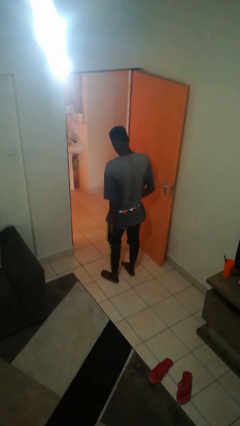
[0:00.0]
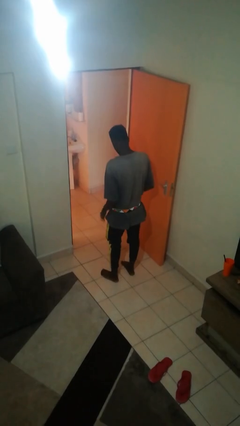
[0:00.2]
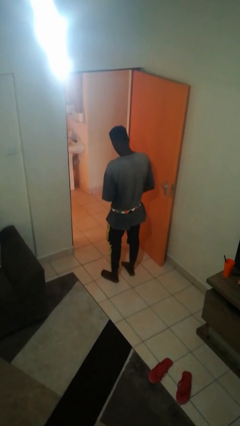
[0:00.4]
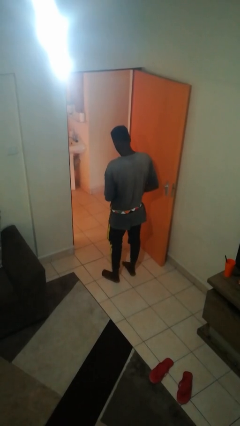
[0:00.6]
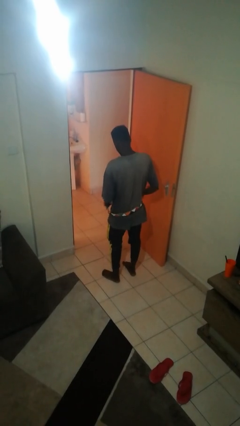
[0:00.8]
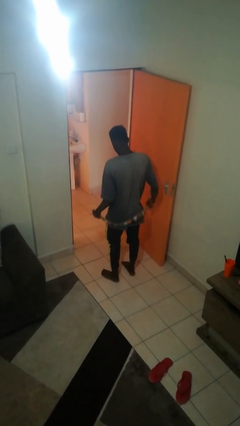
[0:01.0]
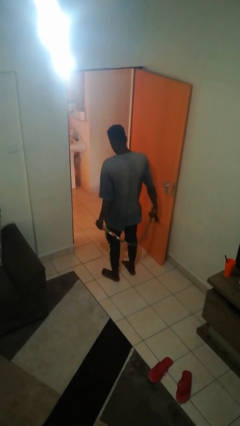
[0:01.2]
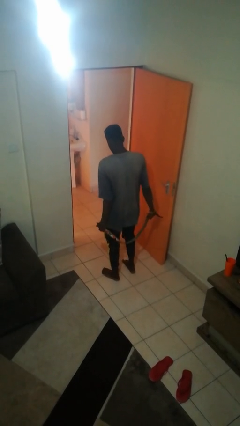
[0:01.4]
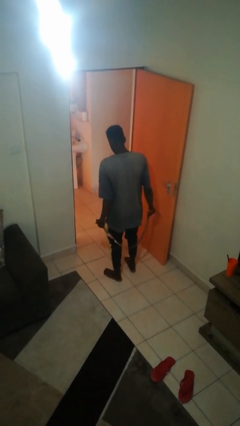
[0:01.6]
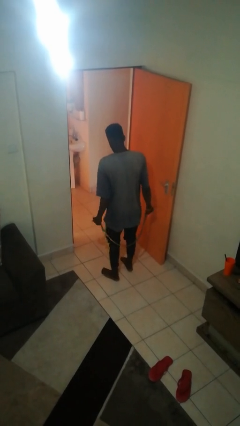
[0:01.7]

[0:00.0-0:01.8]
person takes off belt

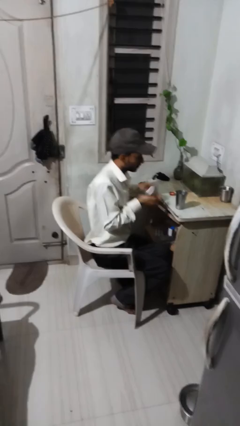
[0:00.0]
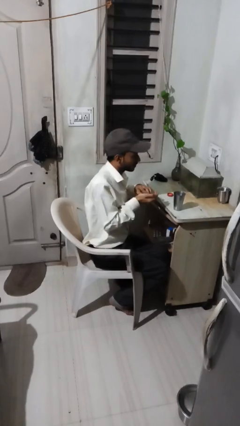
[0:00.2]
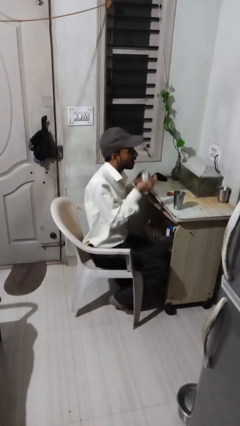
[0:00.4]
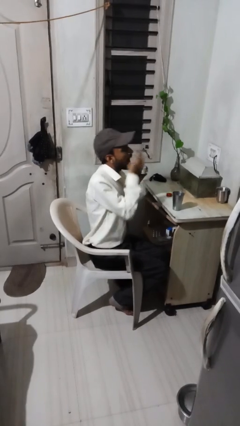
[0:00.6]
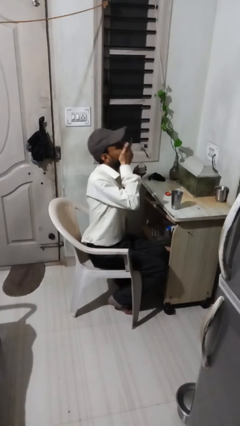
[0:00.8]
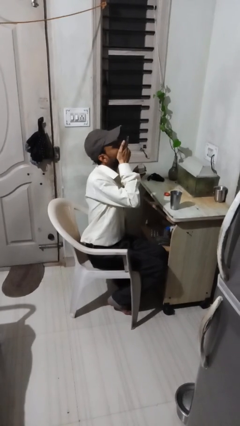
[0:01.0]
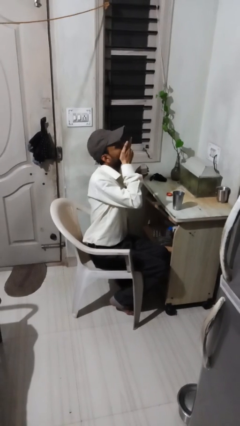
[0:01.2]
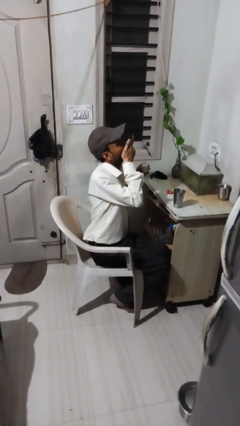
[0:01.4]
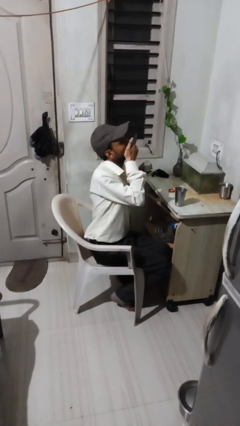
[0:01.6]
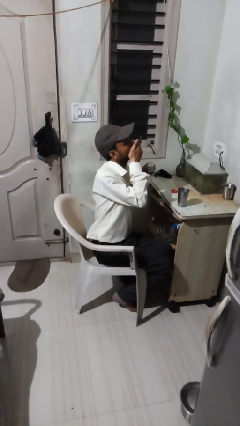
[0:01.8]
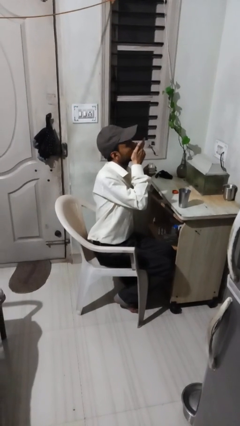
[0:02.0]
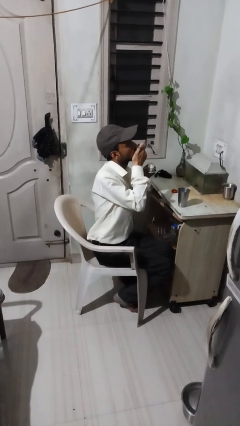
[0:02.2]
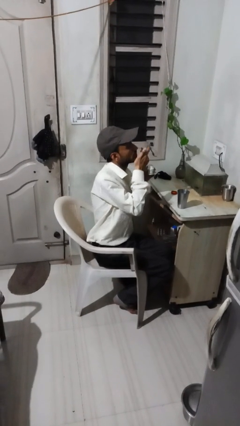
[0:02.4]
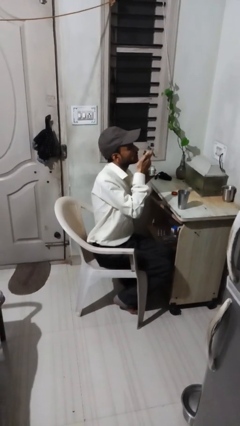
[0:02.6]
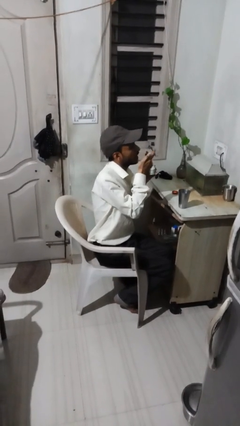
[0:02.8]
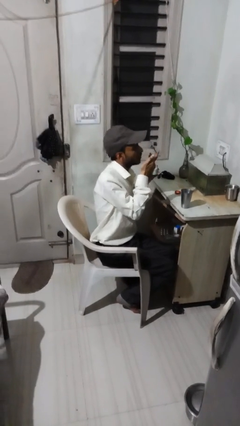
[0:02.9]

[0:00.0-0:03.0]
person takes medicine pills

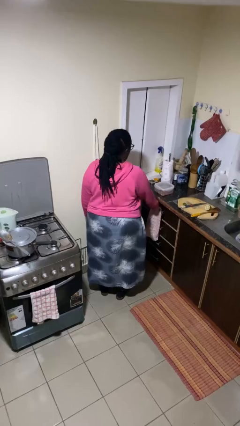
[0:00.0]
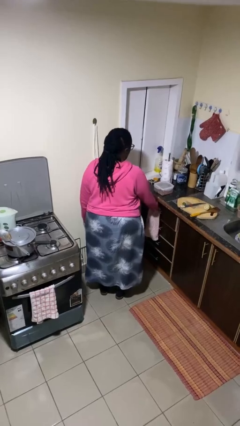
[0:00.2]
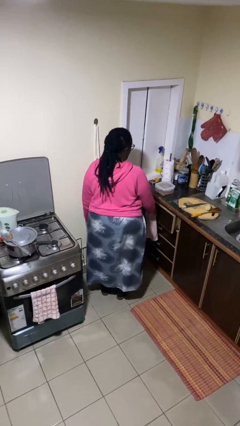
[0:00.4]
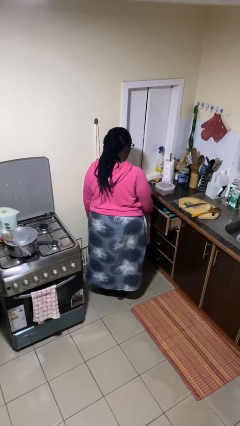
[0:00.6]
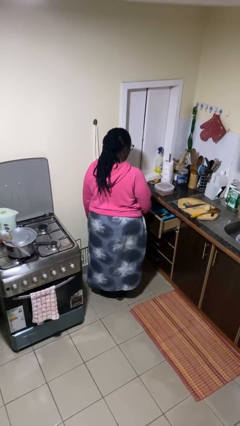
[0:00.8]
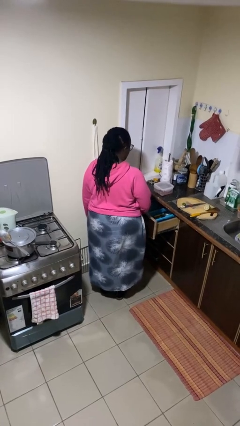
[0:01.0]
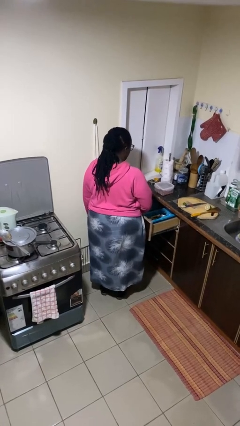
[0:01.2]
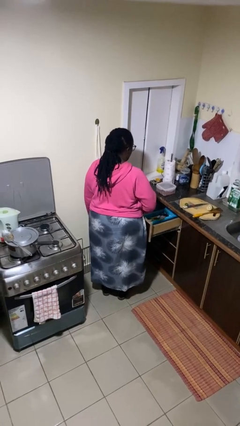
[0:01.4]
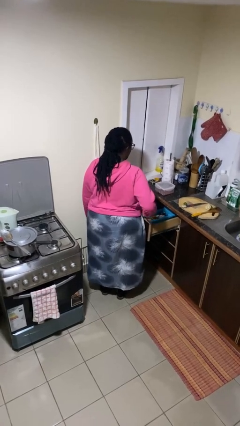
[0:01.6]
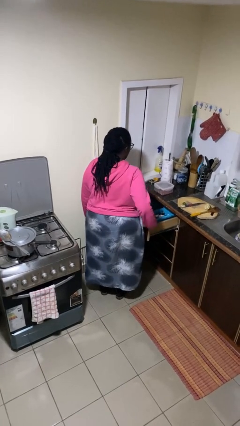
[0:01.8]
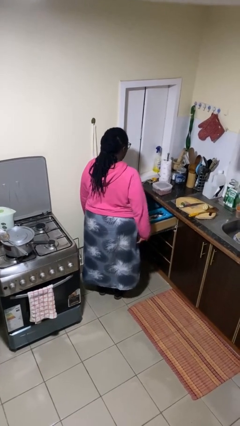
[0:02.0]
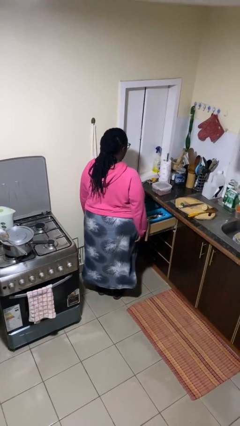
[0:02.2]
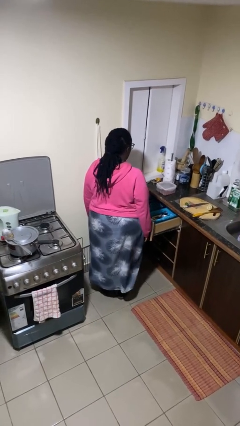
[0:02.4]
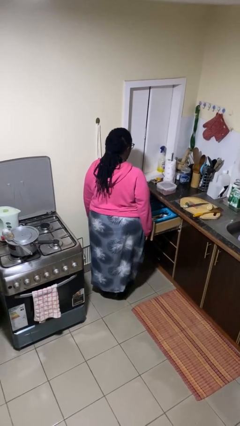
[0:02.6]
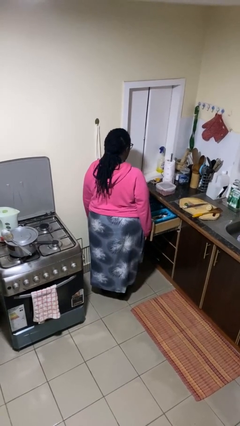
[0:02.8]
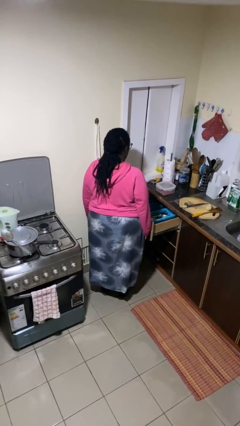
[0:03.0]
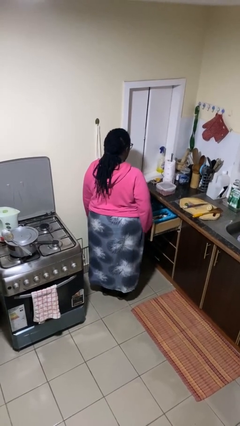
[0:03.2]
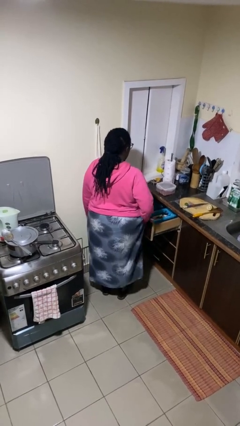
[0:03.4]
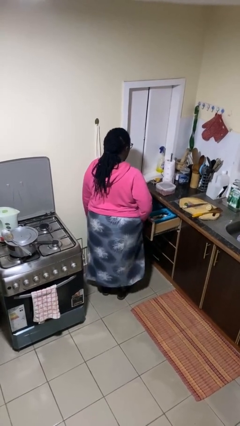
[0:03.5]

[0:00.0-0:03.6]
person opens kitchen drawer

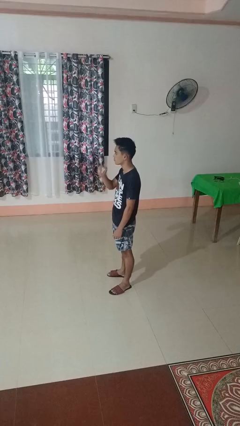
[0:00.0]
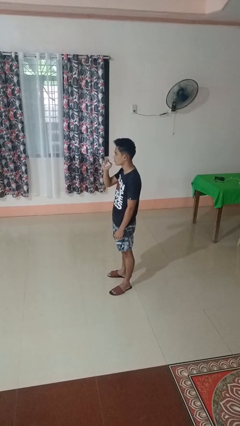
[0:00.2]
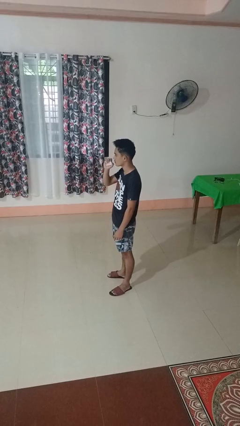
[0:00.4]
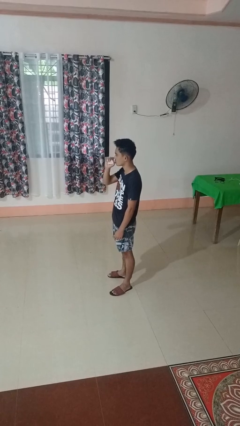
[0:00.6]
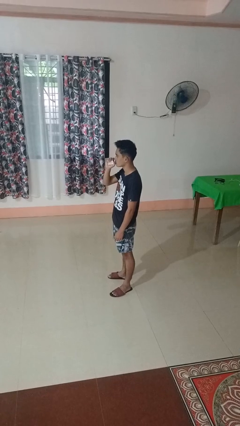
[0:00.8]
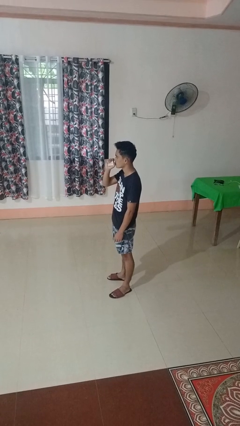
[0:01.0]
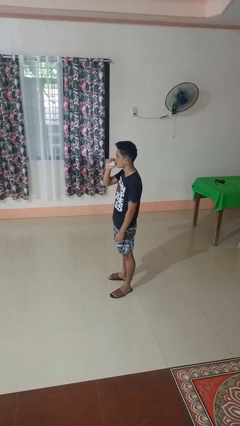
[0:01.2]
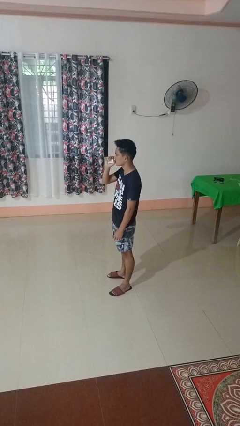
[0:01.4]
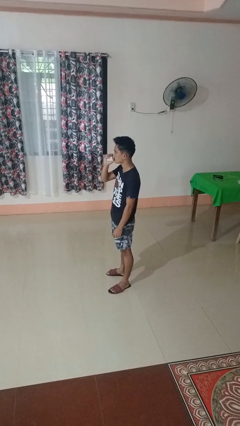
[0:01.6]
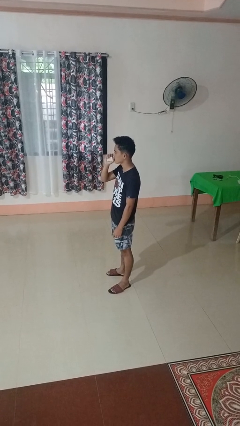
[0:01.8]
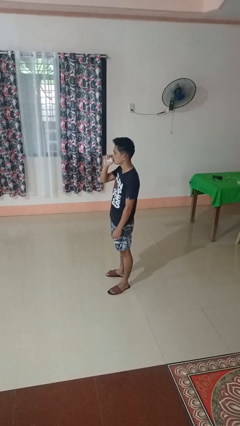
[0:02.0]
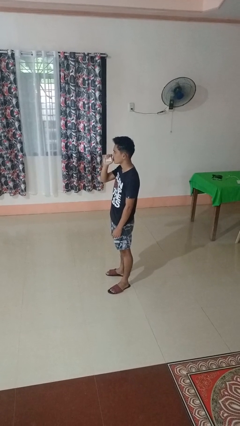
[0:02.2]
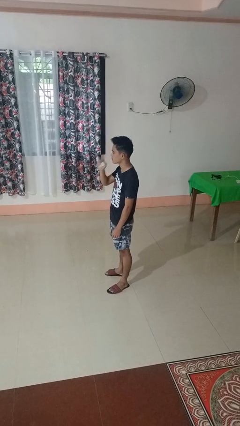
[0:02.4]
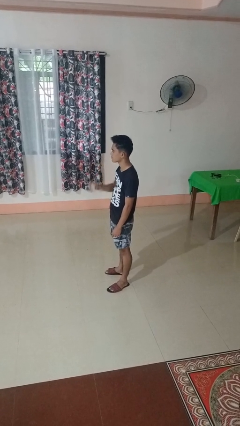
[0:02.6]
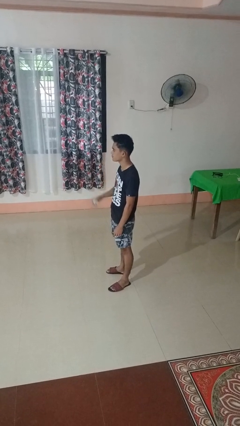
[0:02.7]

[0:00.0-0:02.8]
person vapes

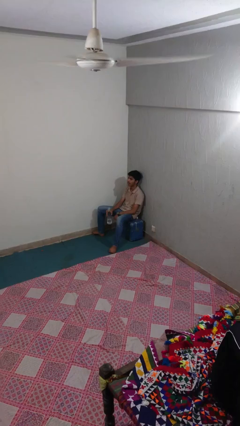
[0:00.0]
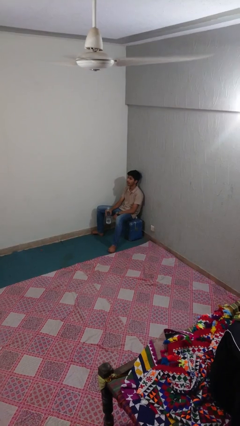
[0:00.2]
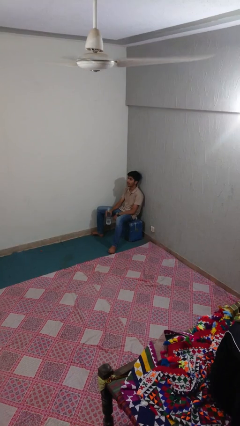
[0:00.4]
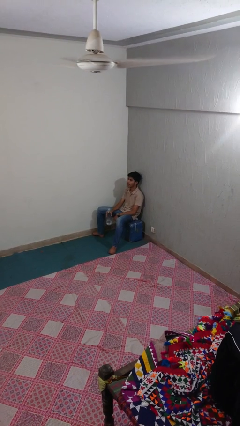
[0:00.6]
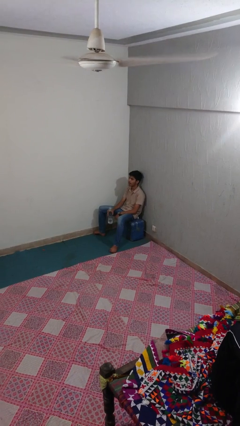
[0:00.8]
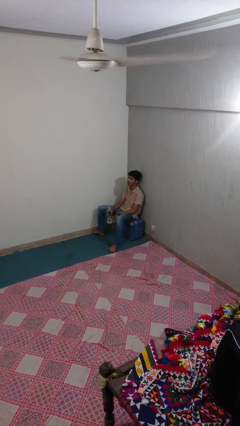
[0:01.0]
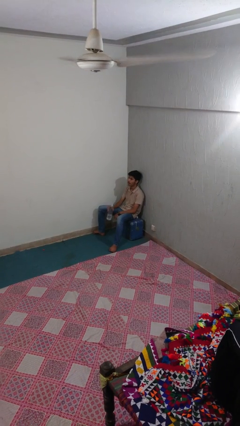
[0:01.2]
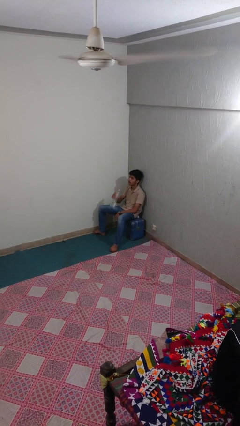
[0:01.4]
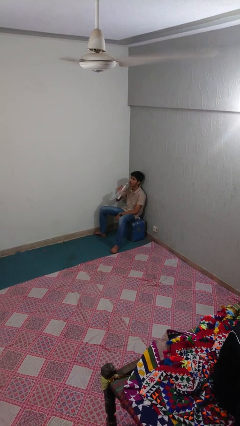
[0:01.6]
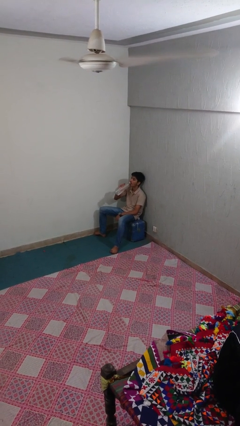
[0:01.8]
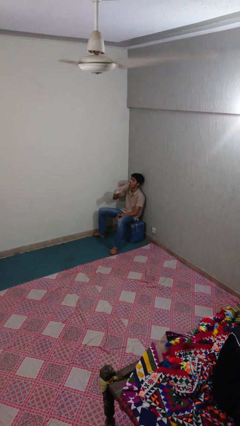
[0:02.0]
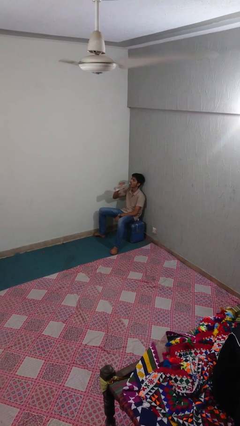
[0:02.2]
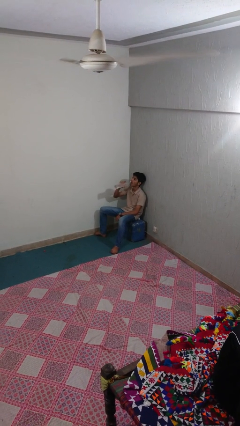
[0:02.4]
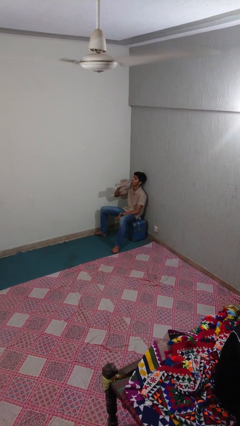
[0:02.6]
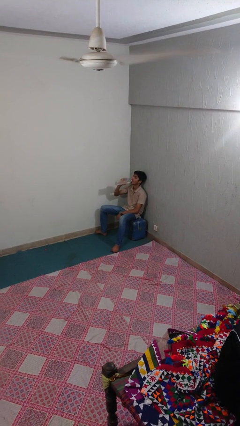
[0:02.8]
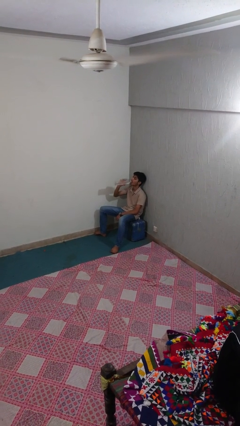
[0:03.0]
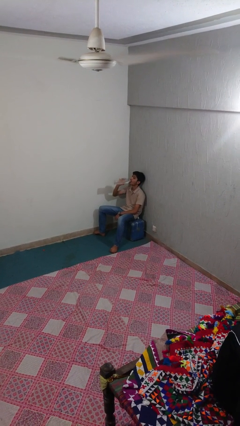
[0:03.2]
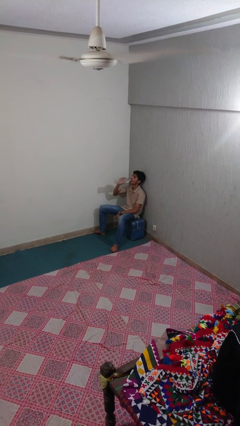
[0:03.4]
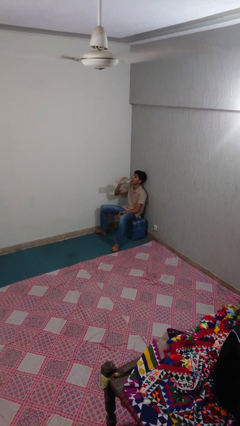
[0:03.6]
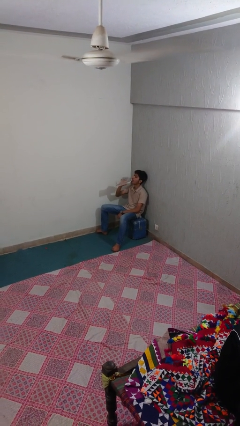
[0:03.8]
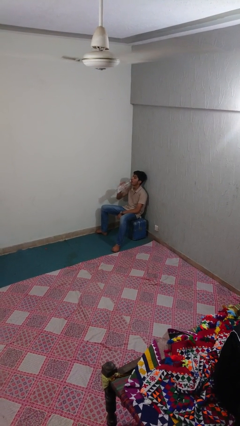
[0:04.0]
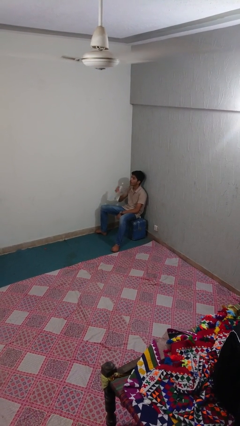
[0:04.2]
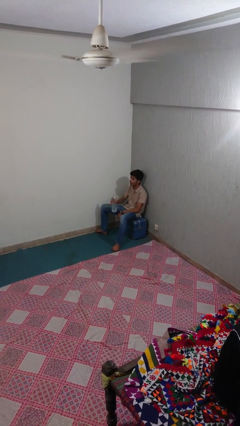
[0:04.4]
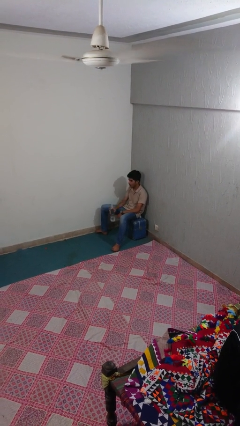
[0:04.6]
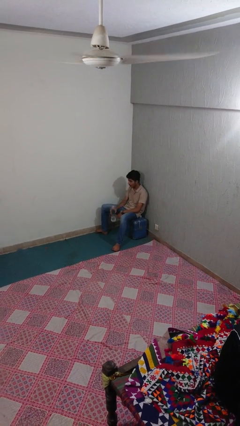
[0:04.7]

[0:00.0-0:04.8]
person drinks from bottle

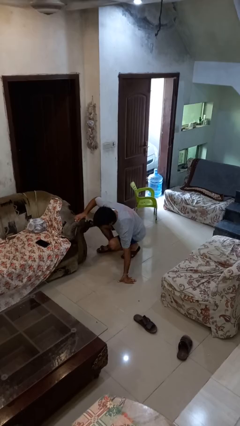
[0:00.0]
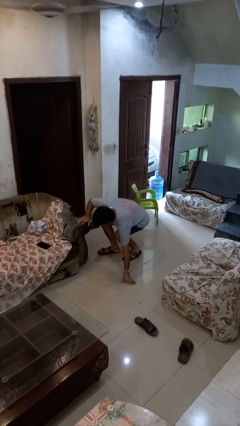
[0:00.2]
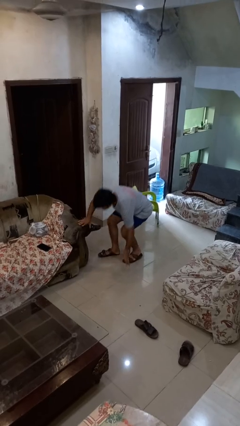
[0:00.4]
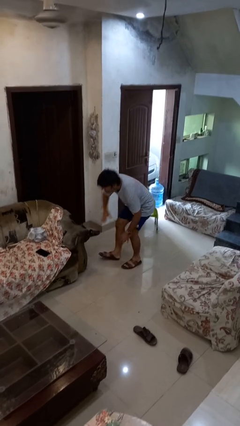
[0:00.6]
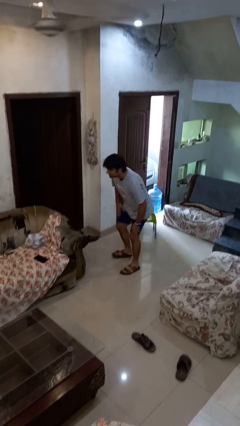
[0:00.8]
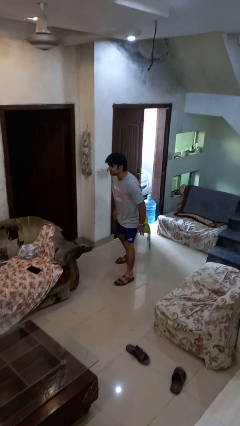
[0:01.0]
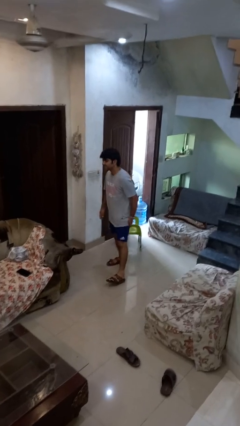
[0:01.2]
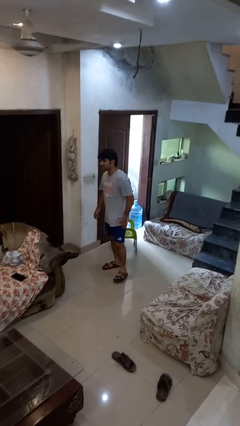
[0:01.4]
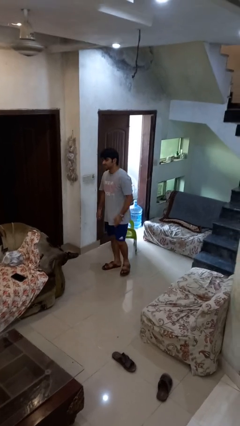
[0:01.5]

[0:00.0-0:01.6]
person stands up from floor
